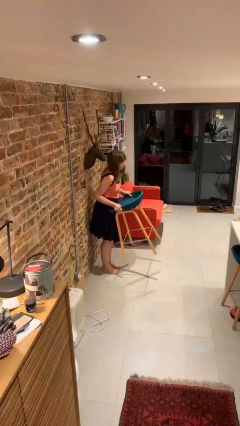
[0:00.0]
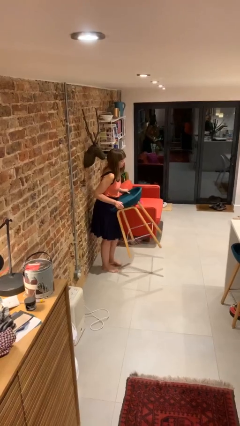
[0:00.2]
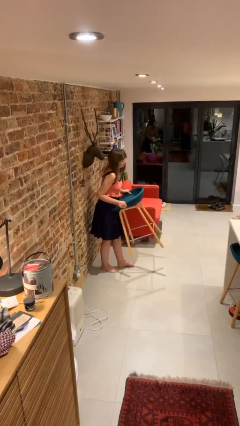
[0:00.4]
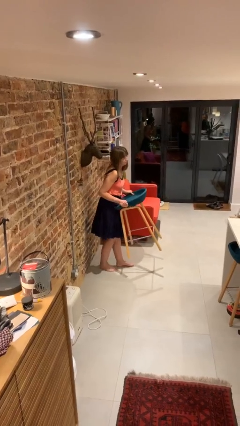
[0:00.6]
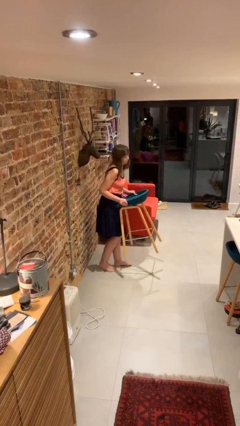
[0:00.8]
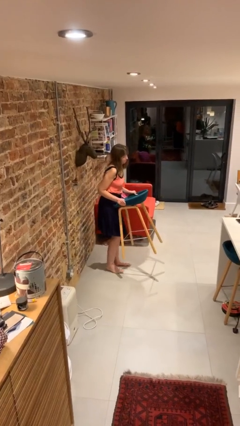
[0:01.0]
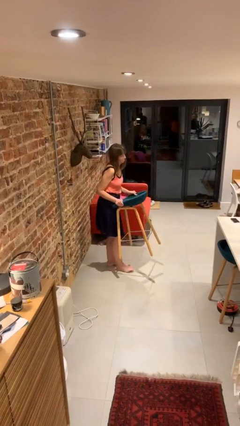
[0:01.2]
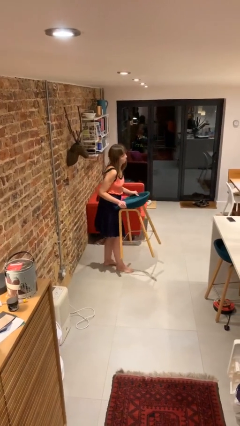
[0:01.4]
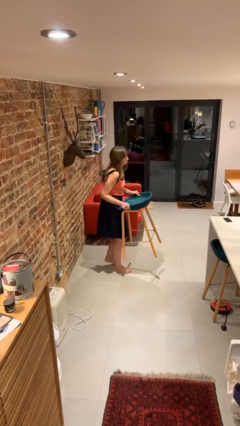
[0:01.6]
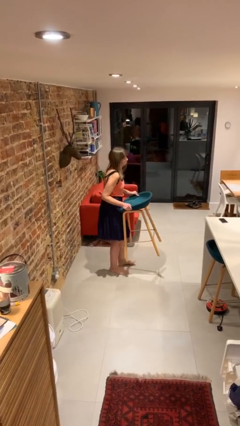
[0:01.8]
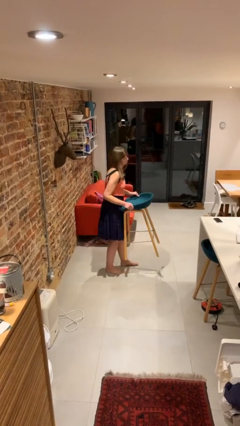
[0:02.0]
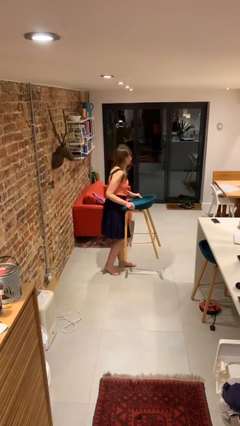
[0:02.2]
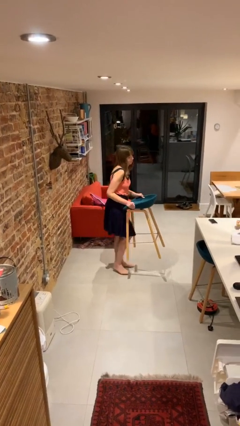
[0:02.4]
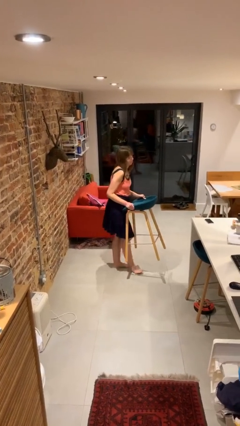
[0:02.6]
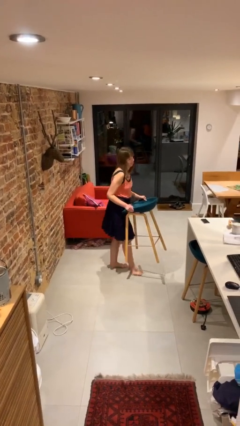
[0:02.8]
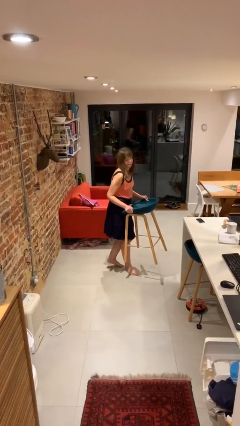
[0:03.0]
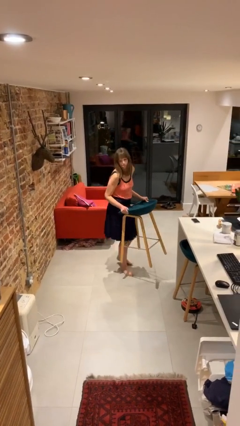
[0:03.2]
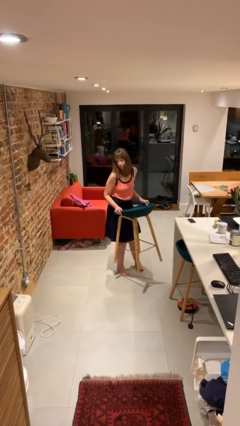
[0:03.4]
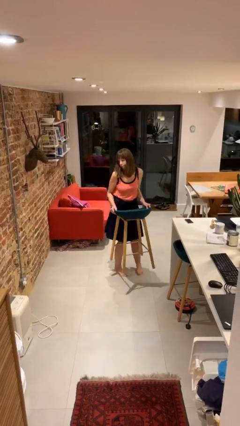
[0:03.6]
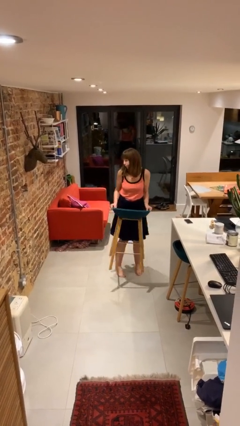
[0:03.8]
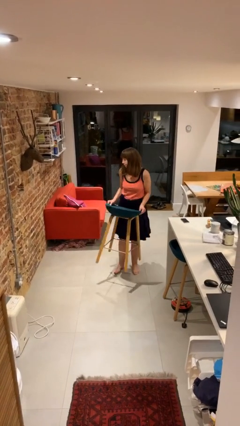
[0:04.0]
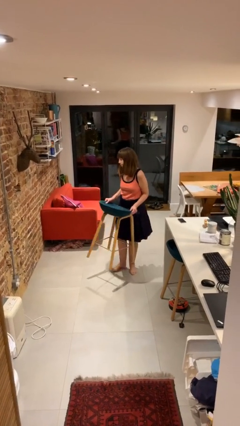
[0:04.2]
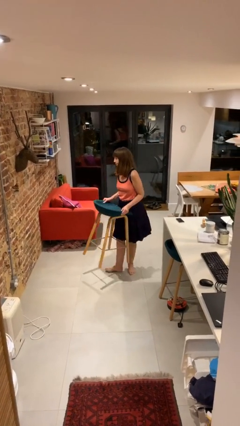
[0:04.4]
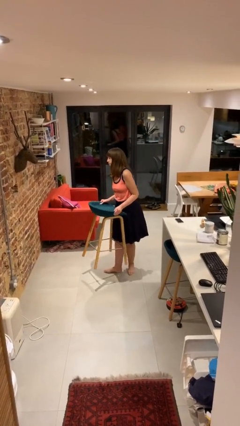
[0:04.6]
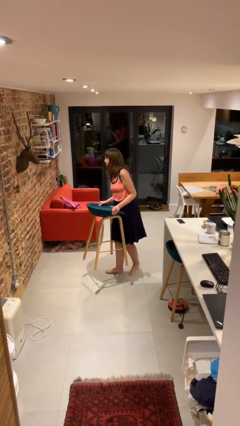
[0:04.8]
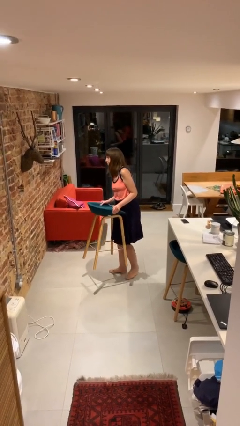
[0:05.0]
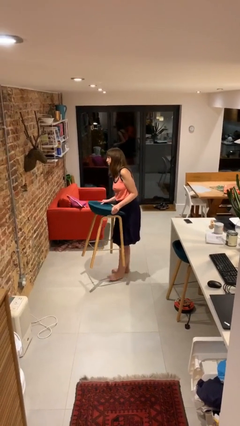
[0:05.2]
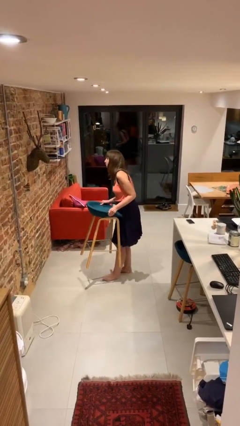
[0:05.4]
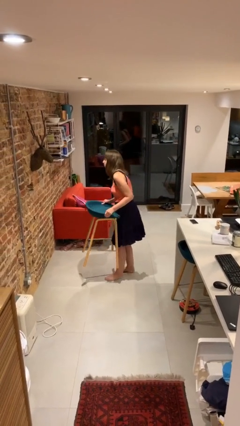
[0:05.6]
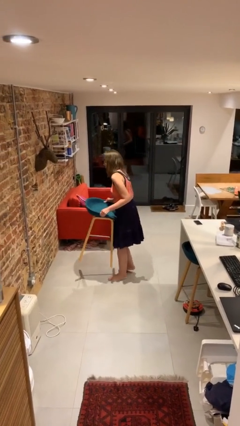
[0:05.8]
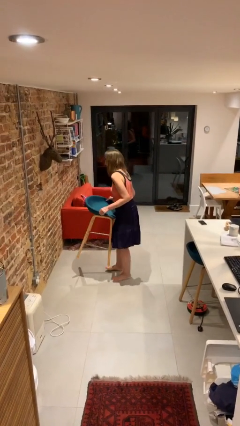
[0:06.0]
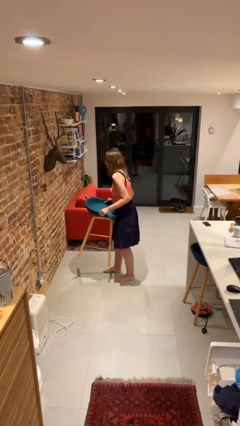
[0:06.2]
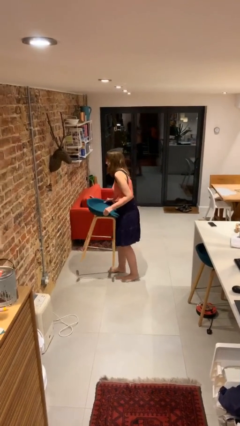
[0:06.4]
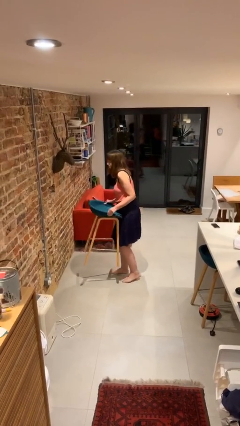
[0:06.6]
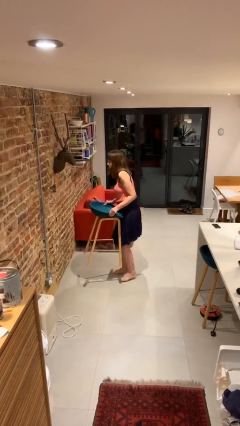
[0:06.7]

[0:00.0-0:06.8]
person carries heavy object

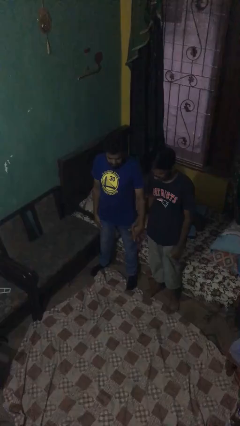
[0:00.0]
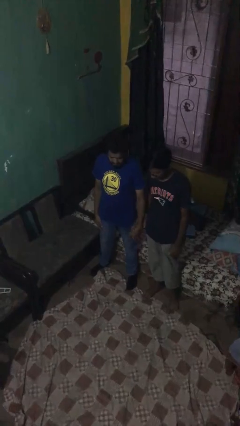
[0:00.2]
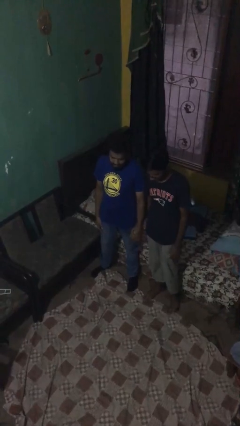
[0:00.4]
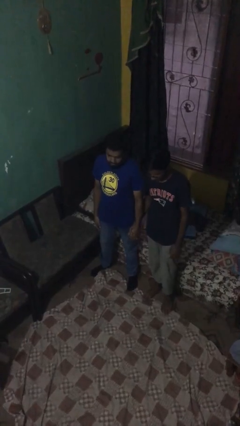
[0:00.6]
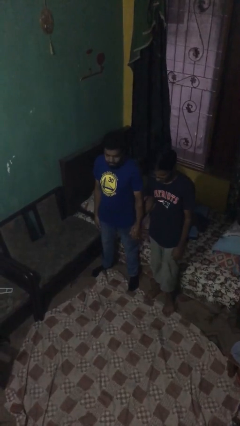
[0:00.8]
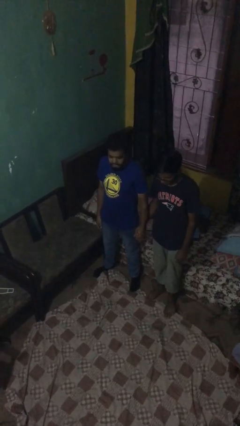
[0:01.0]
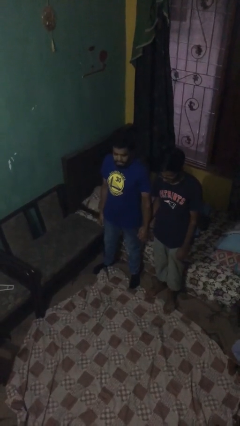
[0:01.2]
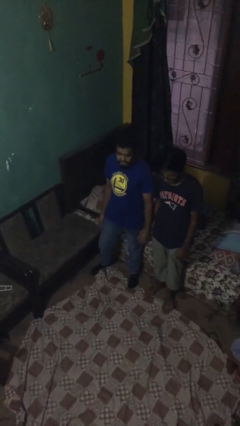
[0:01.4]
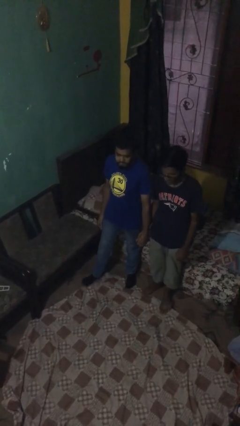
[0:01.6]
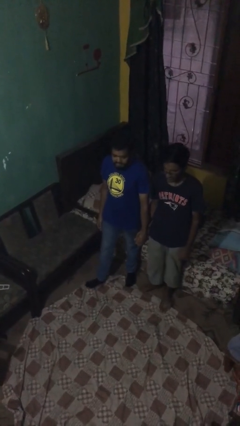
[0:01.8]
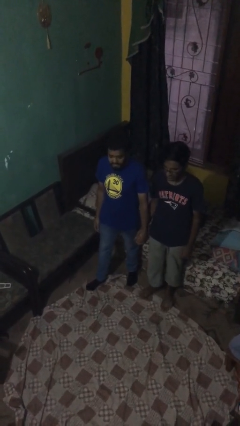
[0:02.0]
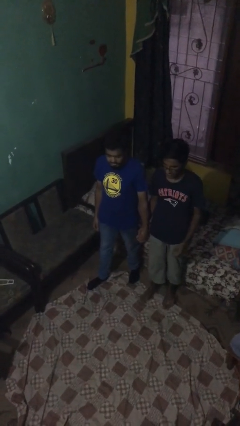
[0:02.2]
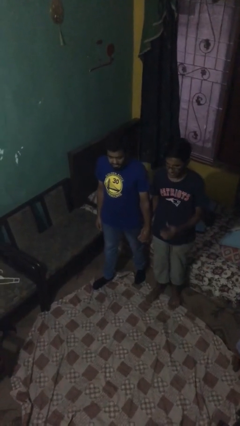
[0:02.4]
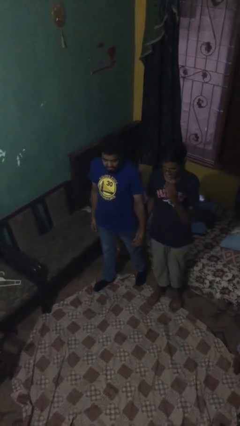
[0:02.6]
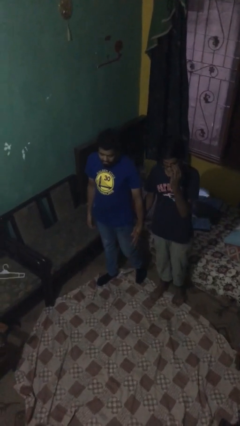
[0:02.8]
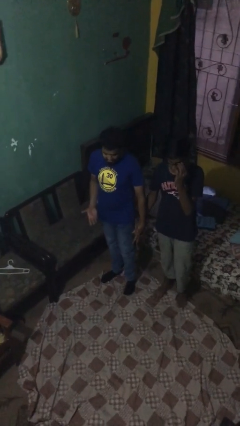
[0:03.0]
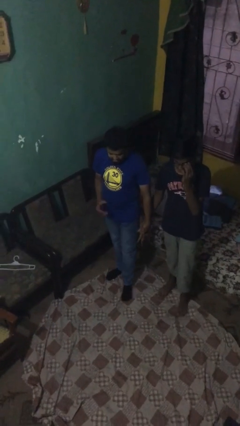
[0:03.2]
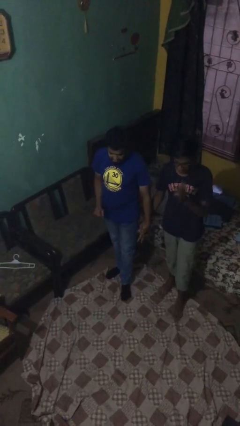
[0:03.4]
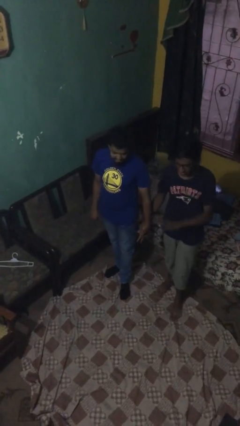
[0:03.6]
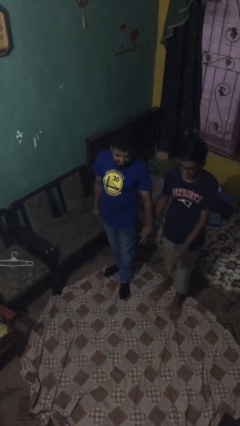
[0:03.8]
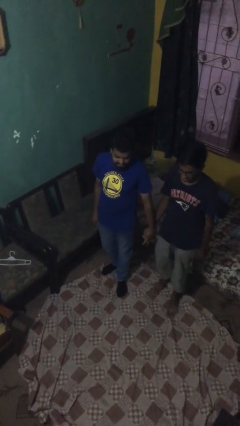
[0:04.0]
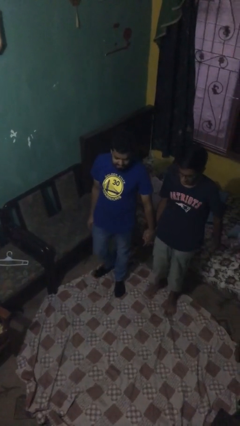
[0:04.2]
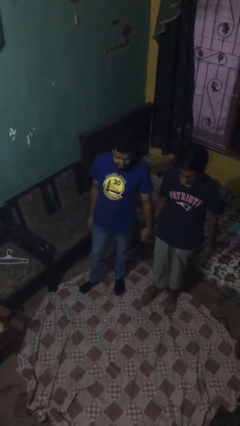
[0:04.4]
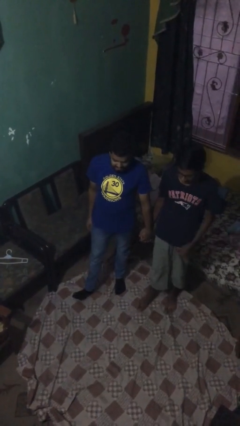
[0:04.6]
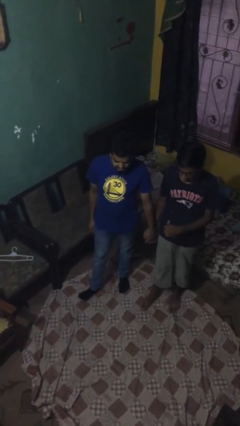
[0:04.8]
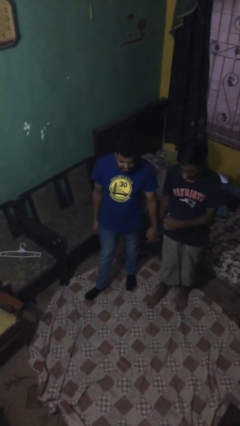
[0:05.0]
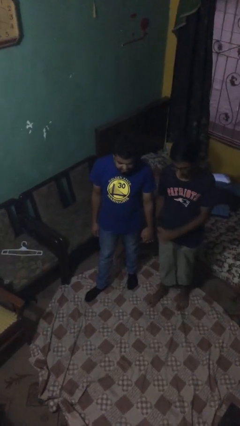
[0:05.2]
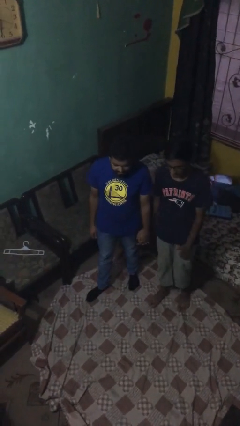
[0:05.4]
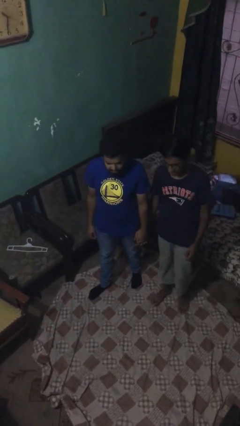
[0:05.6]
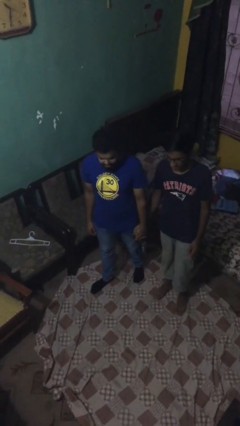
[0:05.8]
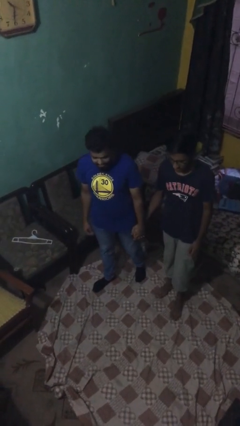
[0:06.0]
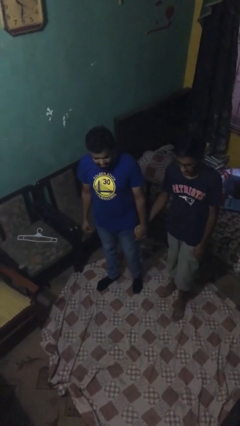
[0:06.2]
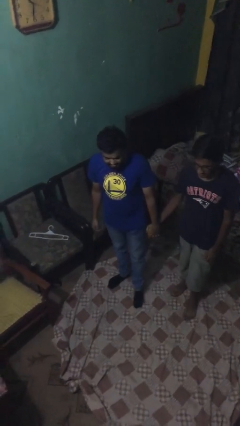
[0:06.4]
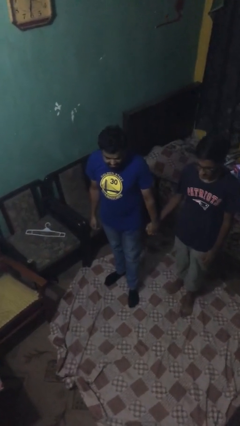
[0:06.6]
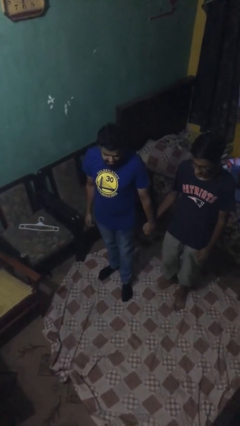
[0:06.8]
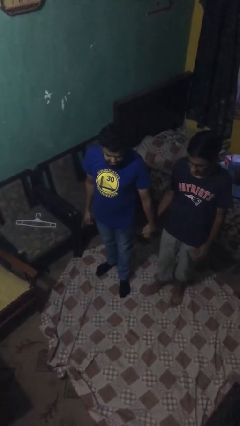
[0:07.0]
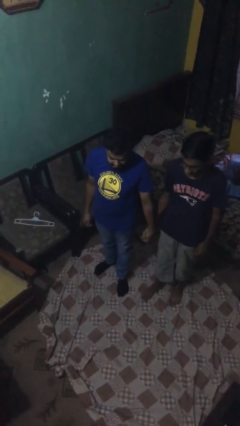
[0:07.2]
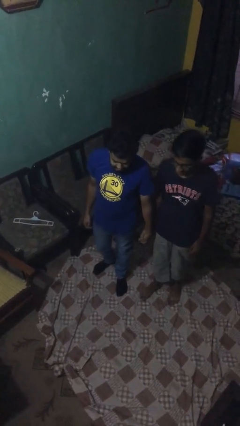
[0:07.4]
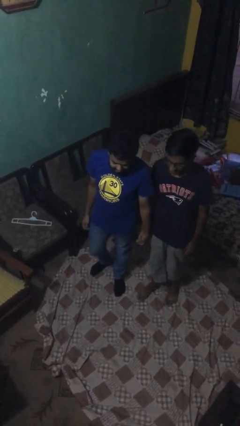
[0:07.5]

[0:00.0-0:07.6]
person holds hand

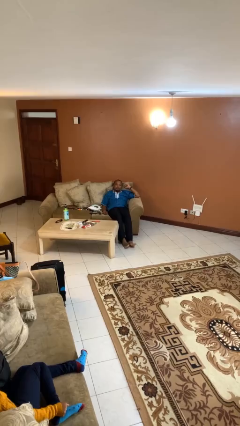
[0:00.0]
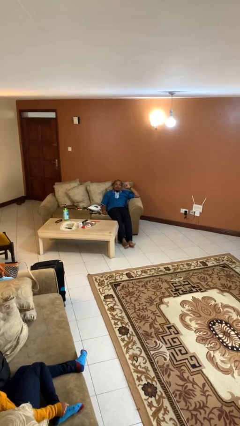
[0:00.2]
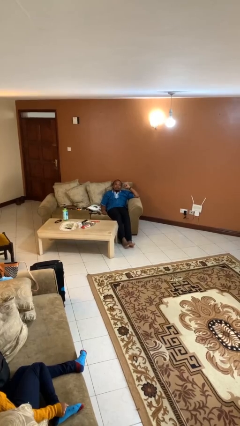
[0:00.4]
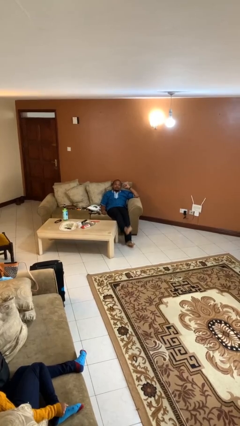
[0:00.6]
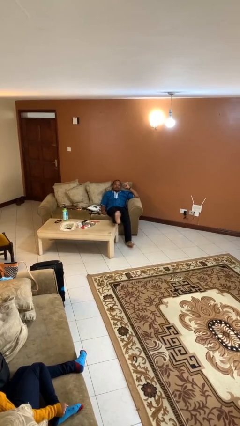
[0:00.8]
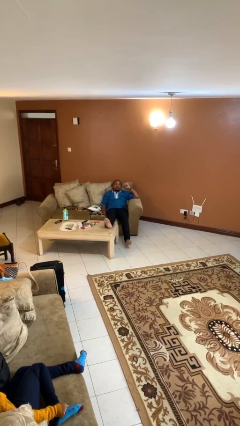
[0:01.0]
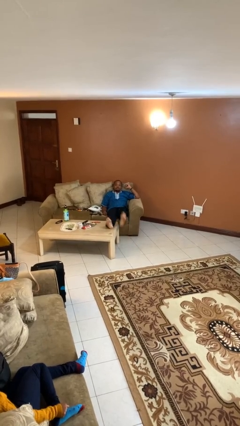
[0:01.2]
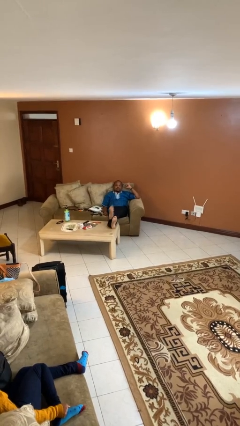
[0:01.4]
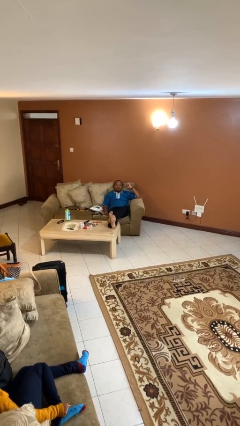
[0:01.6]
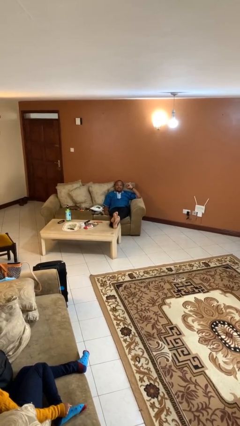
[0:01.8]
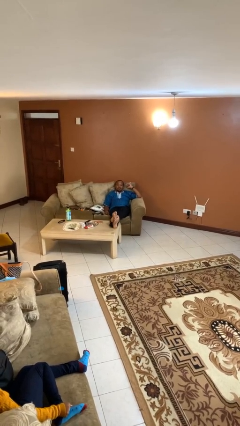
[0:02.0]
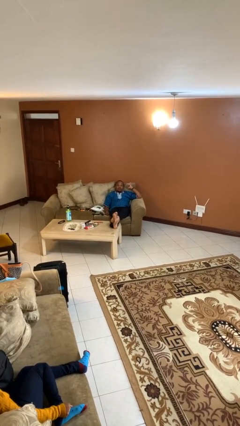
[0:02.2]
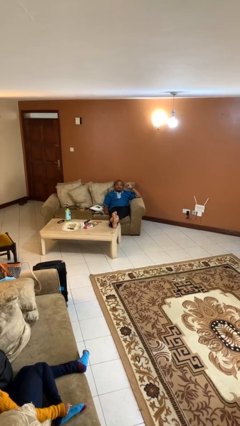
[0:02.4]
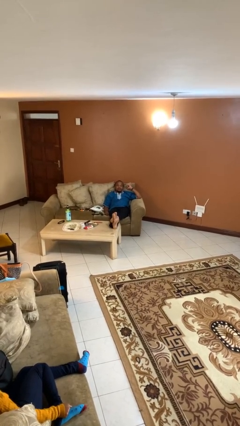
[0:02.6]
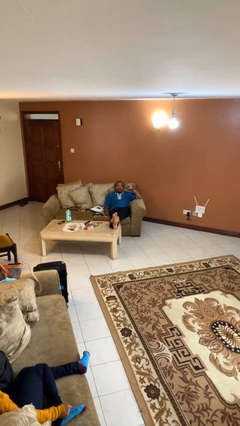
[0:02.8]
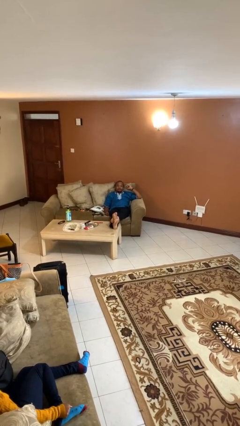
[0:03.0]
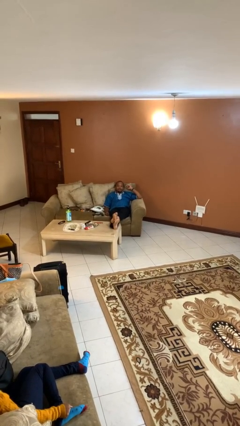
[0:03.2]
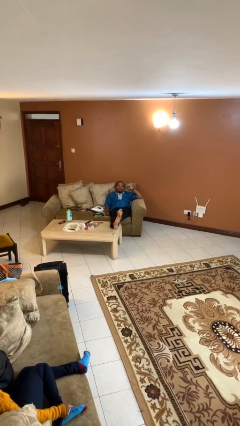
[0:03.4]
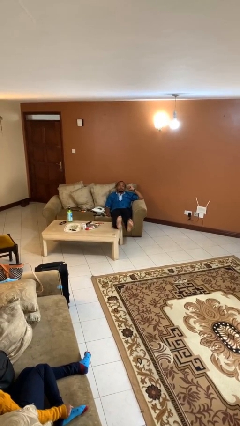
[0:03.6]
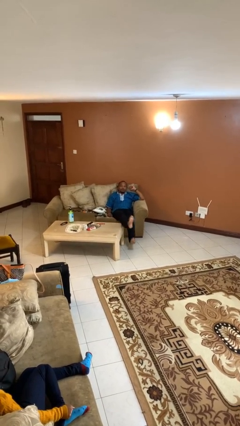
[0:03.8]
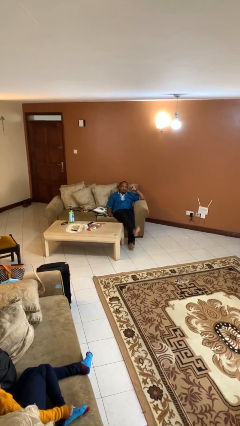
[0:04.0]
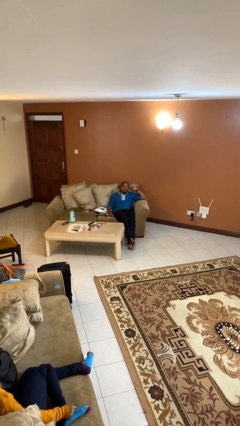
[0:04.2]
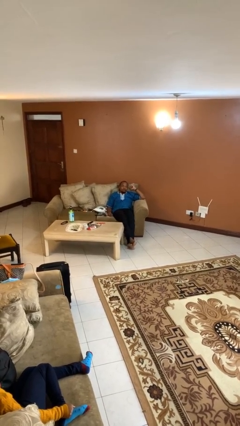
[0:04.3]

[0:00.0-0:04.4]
person puts feet up
